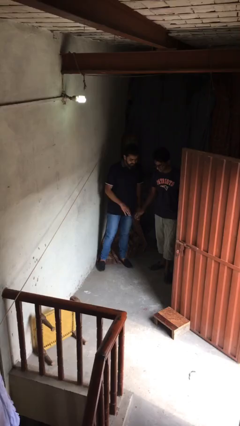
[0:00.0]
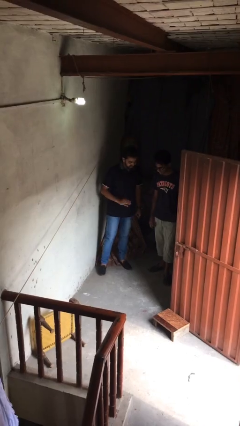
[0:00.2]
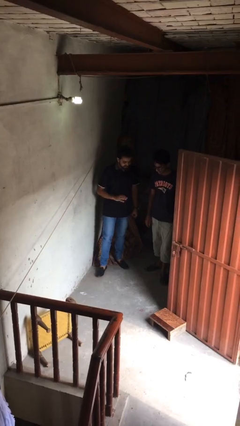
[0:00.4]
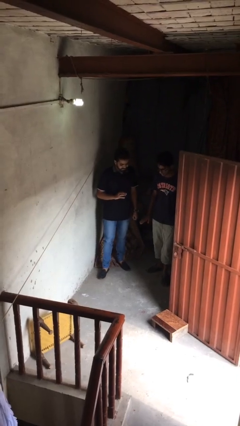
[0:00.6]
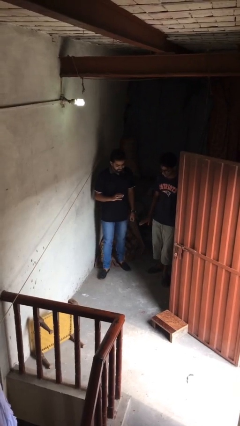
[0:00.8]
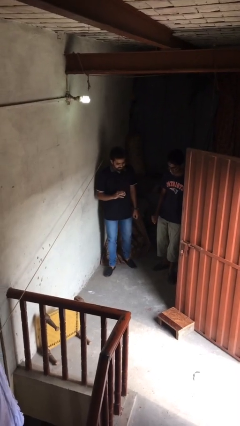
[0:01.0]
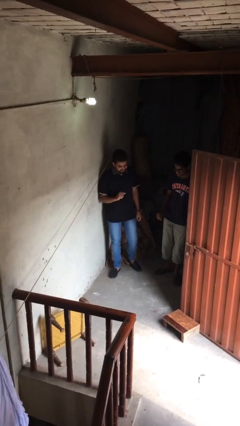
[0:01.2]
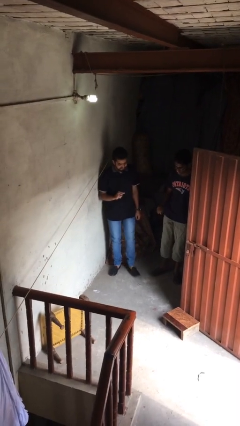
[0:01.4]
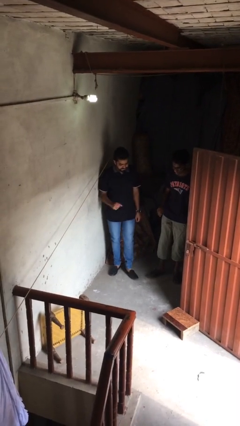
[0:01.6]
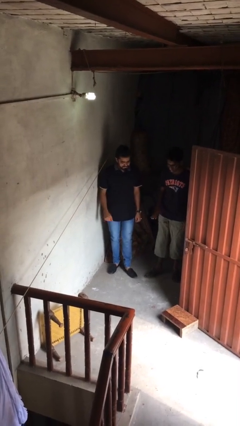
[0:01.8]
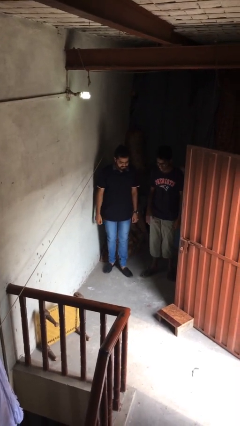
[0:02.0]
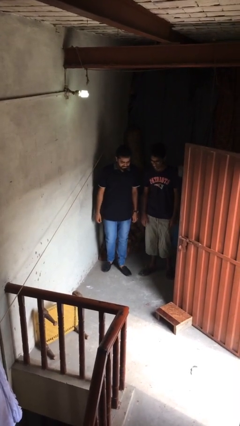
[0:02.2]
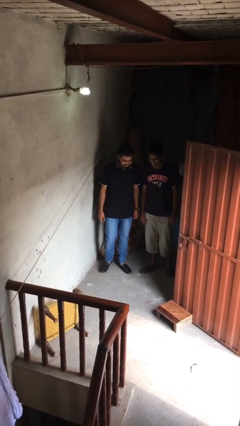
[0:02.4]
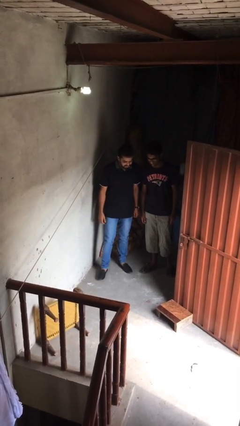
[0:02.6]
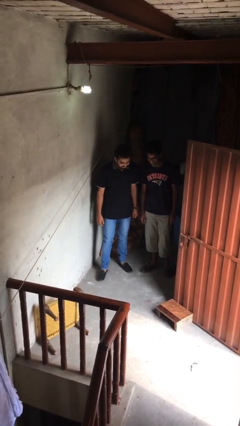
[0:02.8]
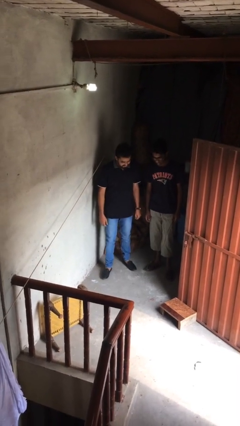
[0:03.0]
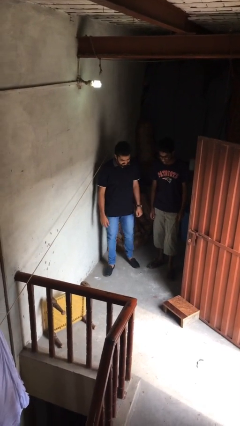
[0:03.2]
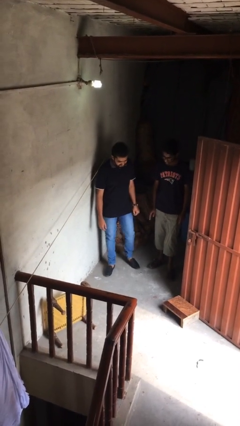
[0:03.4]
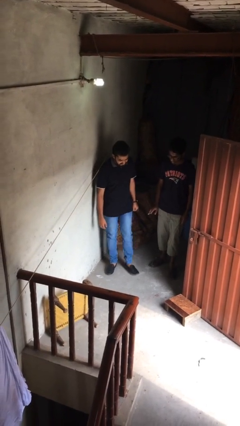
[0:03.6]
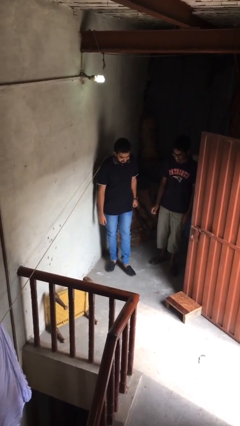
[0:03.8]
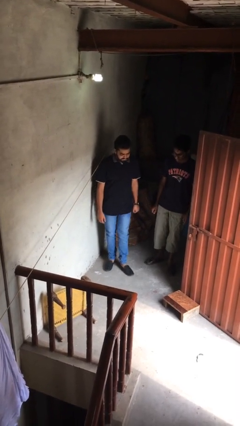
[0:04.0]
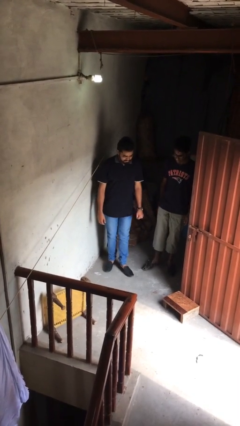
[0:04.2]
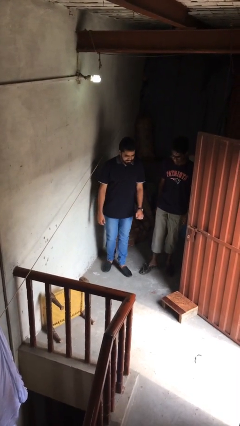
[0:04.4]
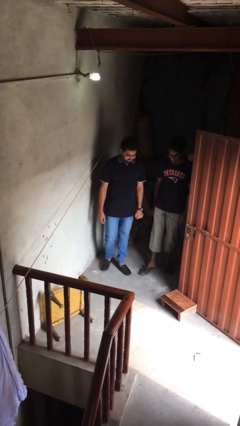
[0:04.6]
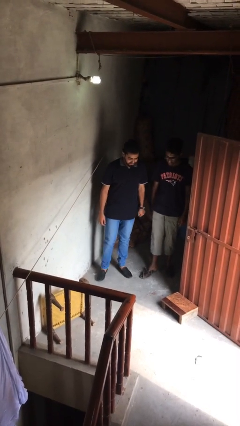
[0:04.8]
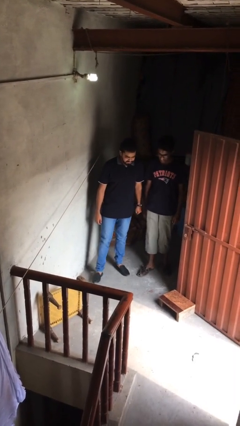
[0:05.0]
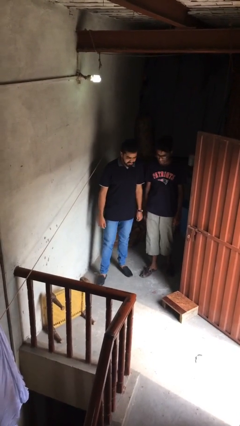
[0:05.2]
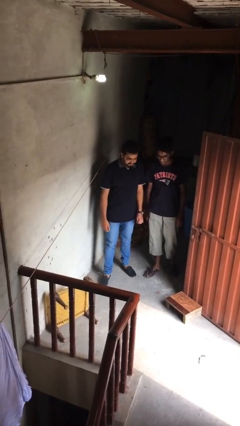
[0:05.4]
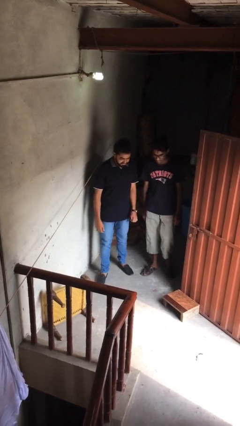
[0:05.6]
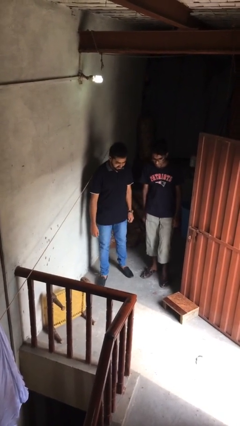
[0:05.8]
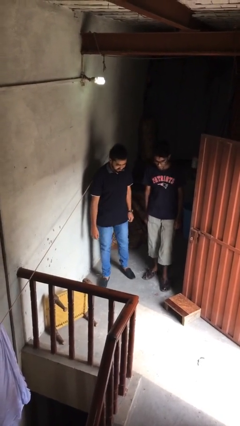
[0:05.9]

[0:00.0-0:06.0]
person talks to person

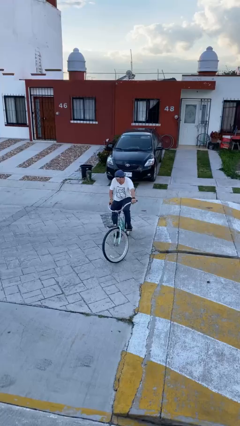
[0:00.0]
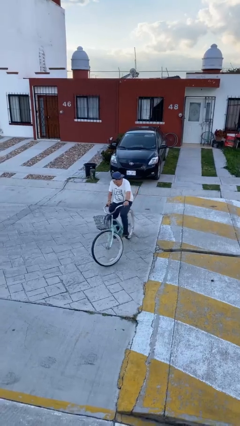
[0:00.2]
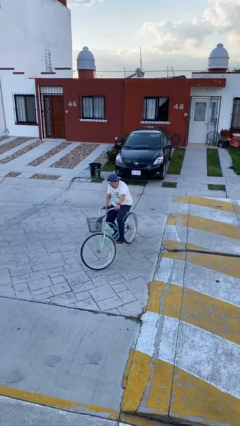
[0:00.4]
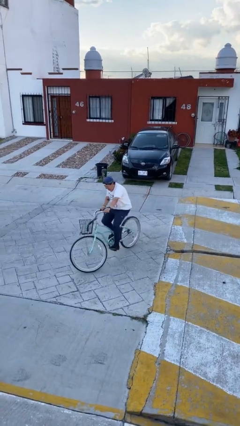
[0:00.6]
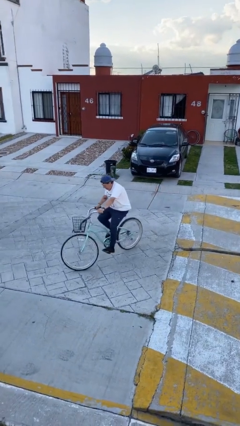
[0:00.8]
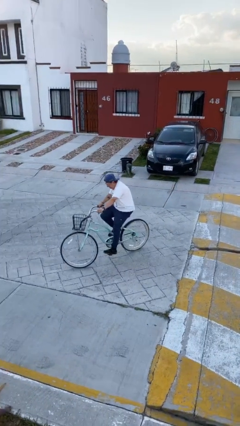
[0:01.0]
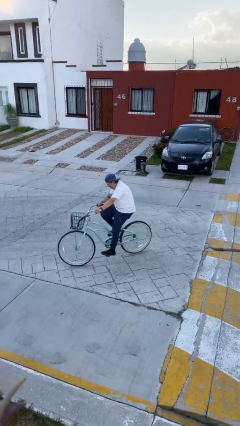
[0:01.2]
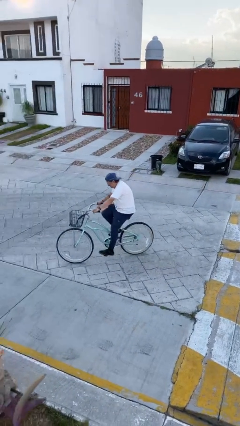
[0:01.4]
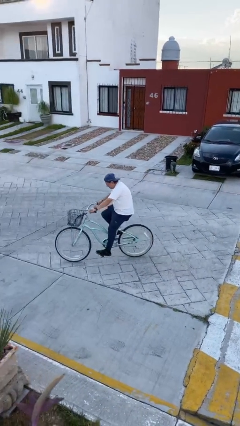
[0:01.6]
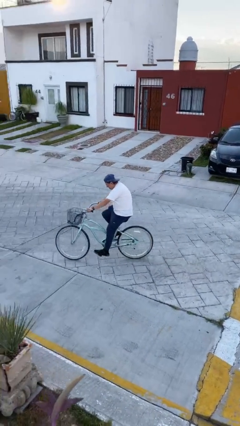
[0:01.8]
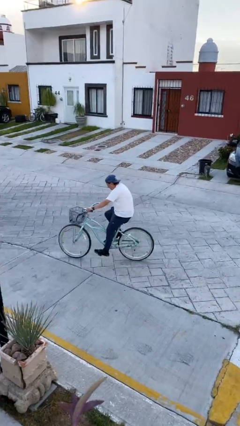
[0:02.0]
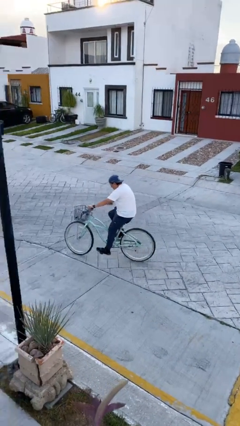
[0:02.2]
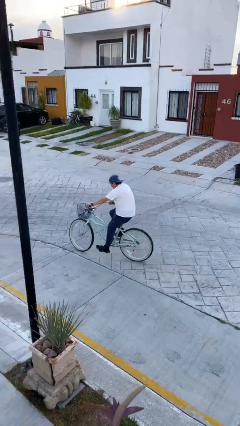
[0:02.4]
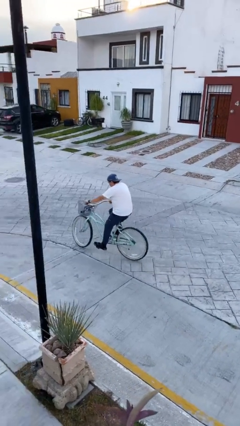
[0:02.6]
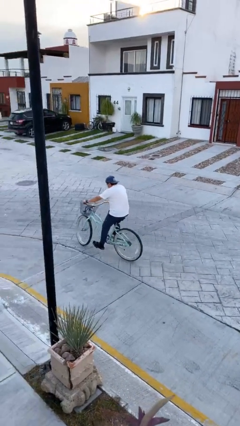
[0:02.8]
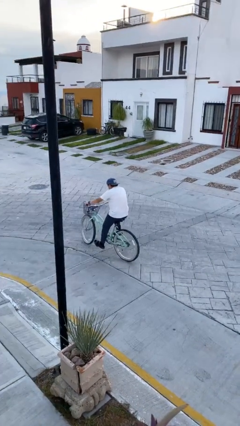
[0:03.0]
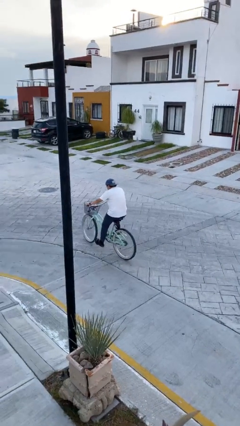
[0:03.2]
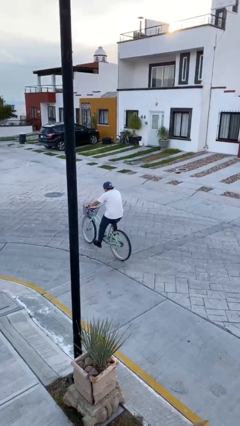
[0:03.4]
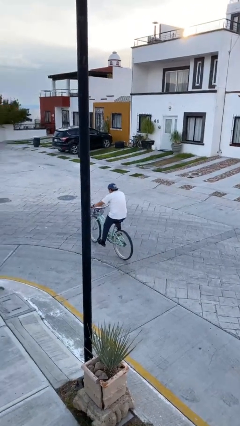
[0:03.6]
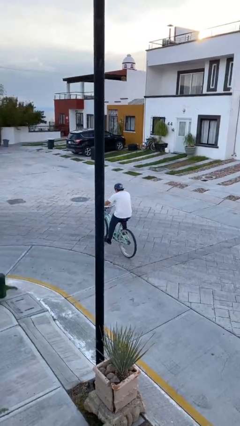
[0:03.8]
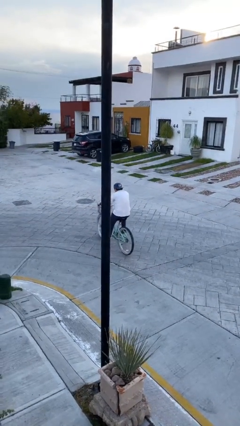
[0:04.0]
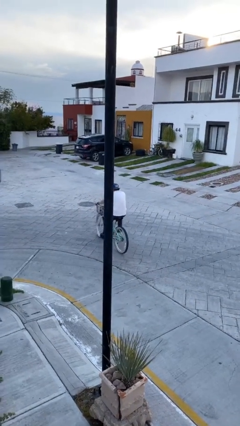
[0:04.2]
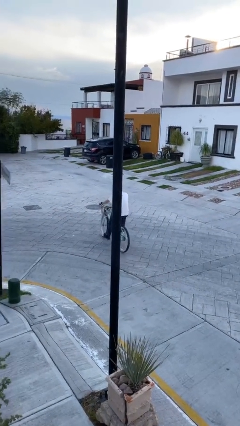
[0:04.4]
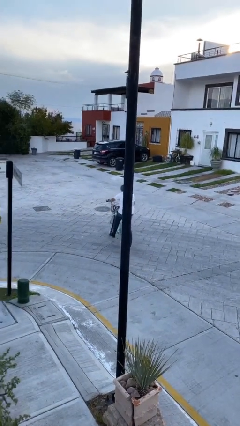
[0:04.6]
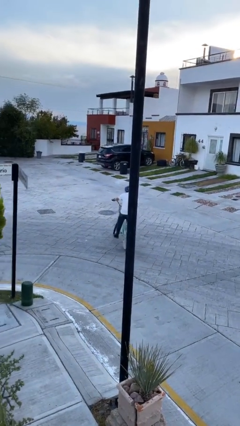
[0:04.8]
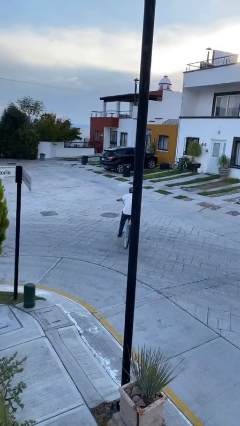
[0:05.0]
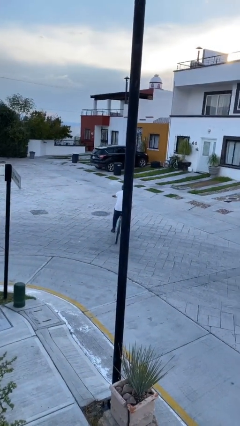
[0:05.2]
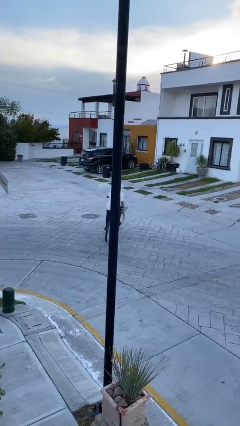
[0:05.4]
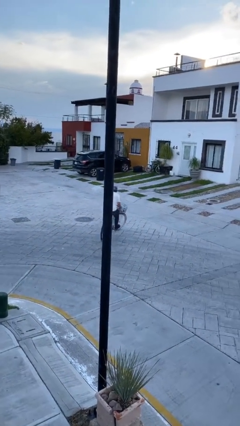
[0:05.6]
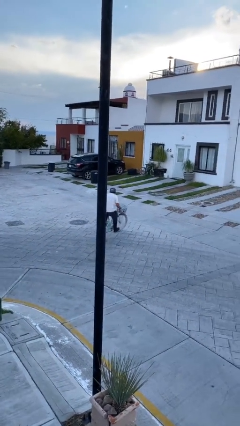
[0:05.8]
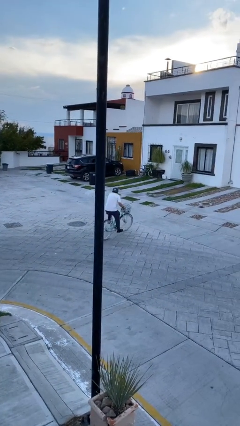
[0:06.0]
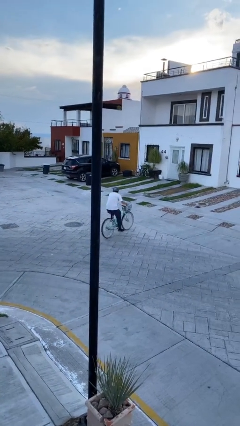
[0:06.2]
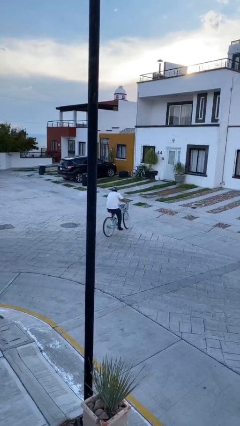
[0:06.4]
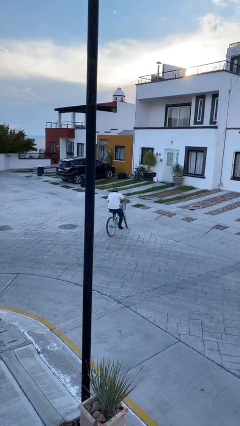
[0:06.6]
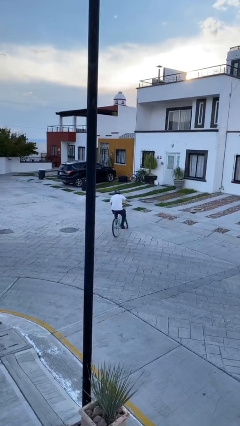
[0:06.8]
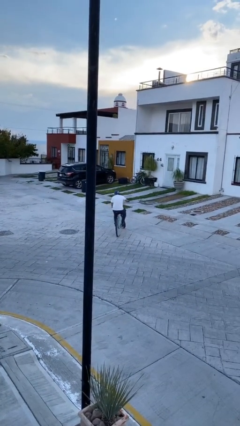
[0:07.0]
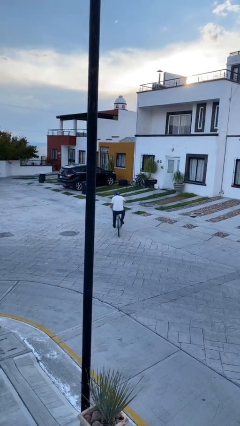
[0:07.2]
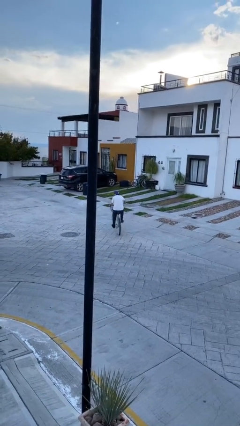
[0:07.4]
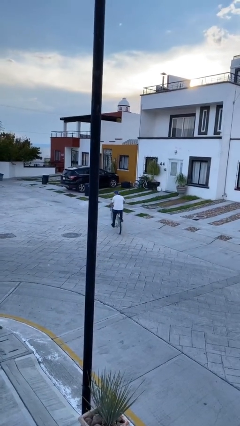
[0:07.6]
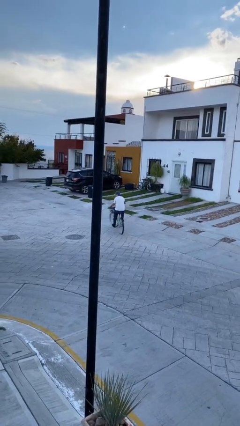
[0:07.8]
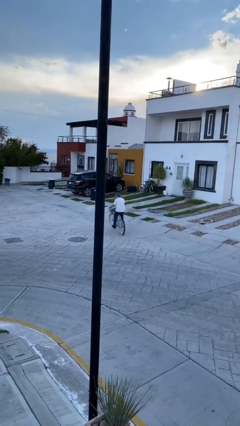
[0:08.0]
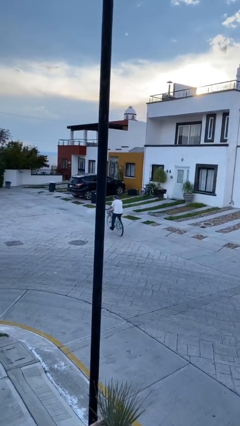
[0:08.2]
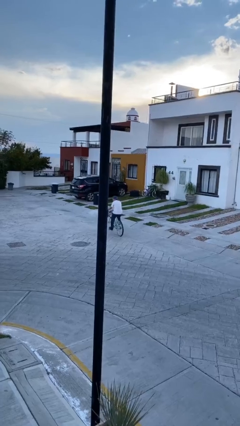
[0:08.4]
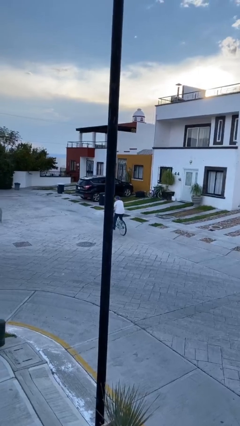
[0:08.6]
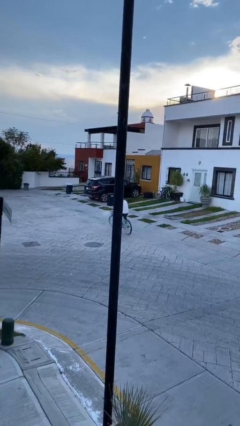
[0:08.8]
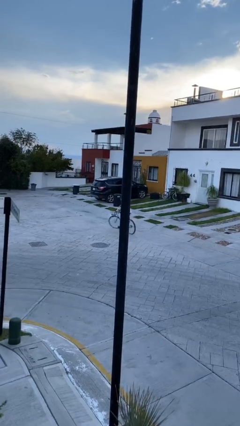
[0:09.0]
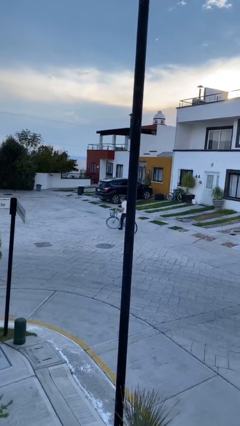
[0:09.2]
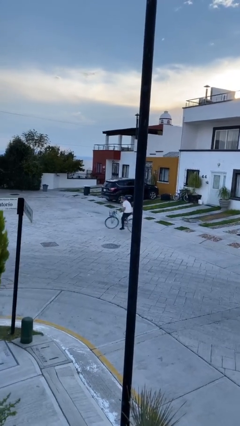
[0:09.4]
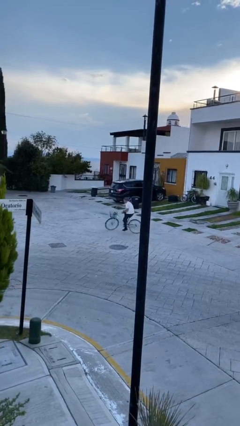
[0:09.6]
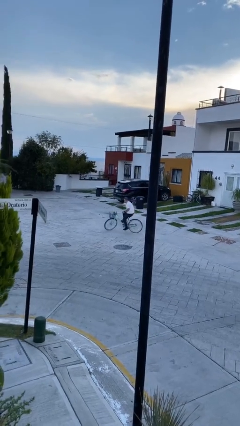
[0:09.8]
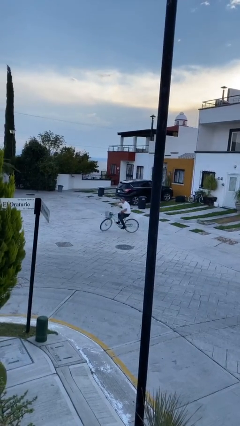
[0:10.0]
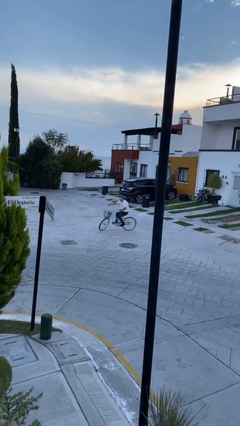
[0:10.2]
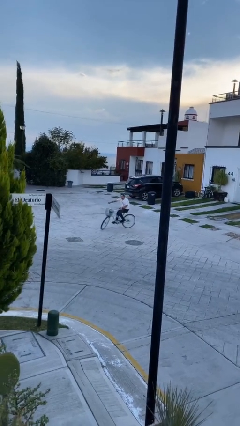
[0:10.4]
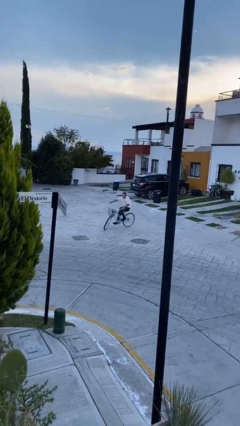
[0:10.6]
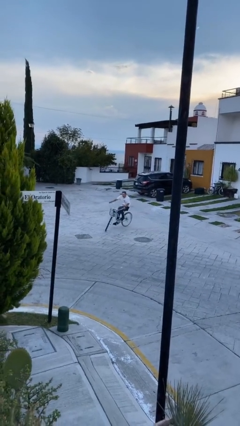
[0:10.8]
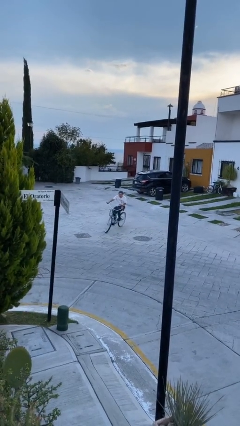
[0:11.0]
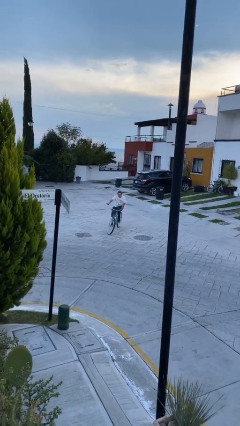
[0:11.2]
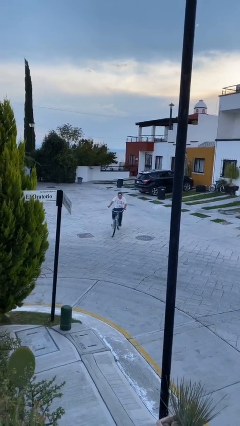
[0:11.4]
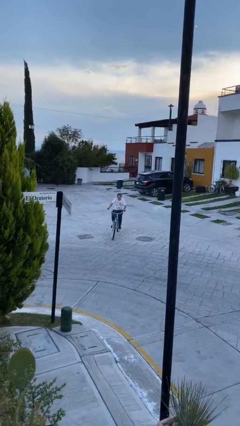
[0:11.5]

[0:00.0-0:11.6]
person rides bicycle

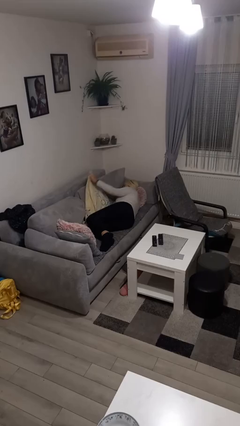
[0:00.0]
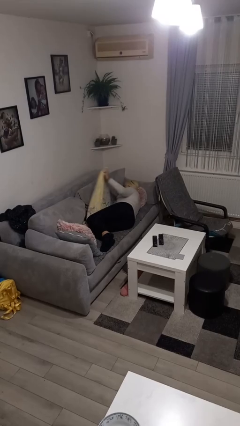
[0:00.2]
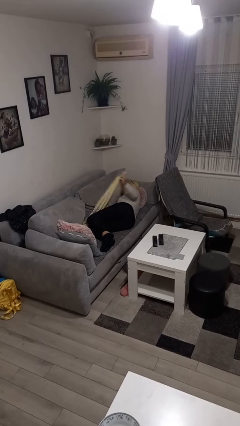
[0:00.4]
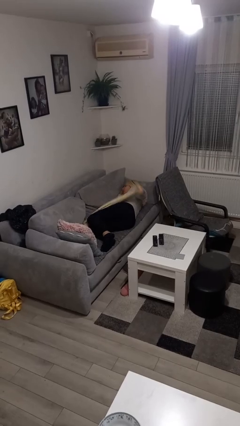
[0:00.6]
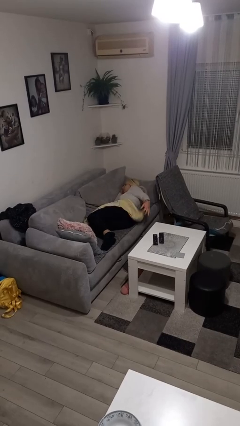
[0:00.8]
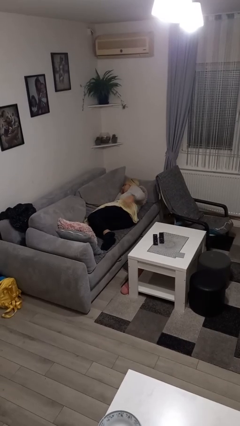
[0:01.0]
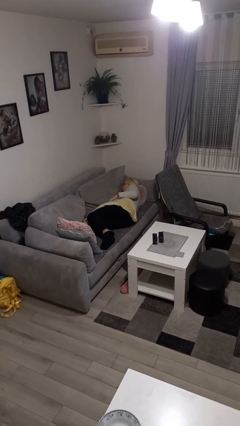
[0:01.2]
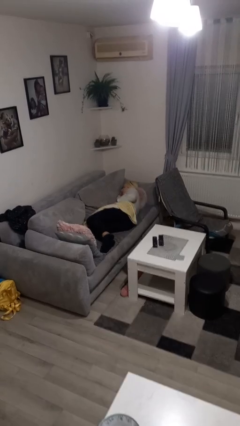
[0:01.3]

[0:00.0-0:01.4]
person covers with blanket
